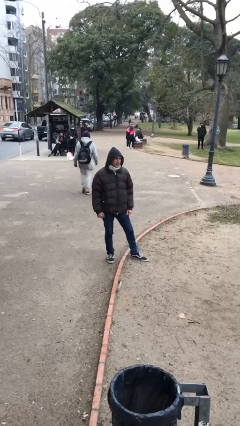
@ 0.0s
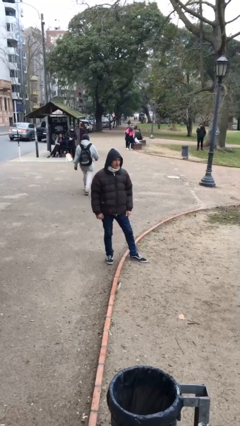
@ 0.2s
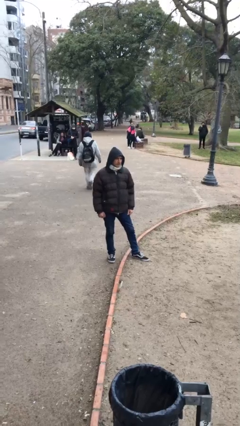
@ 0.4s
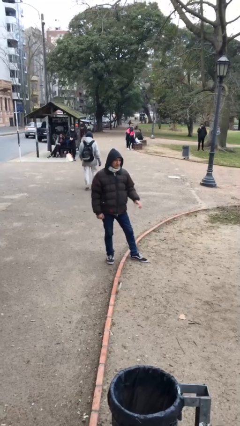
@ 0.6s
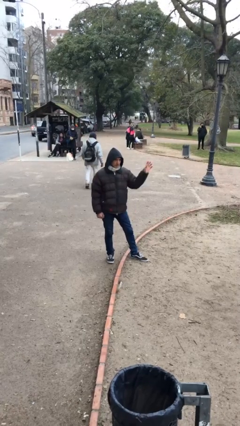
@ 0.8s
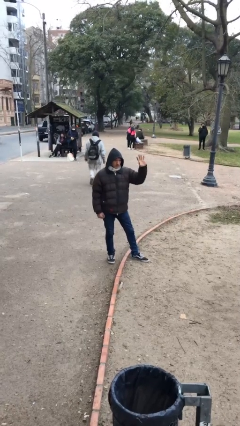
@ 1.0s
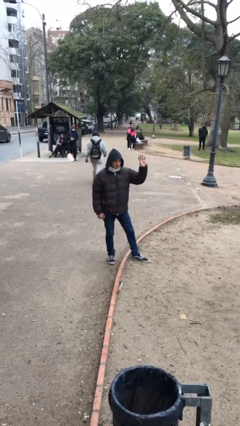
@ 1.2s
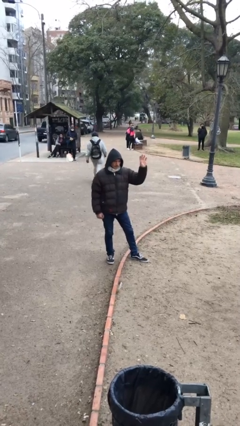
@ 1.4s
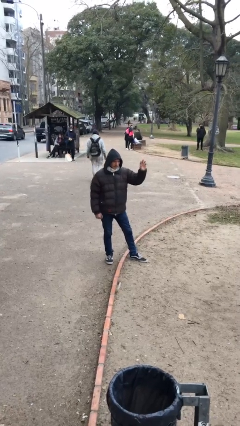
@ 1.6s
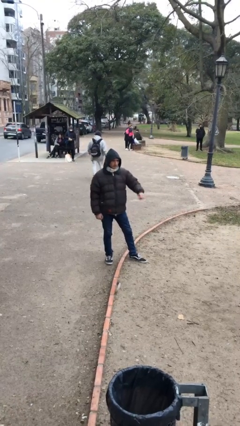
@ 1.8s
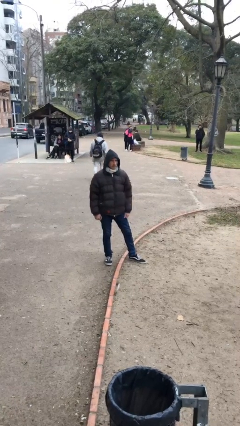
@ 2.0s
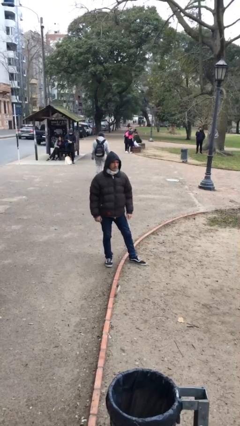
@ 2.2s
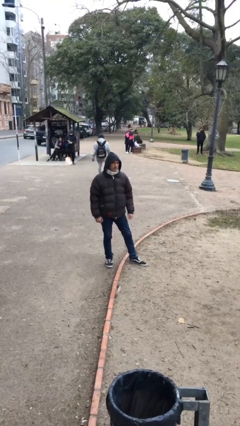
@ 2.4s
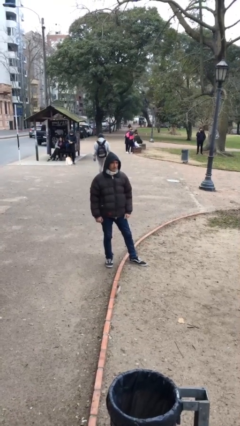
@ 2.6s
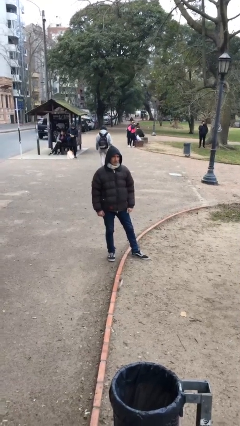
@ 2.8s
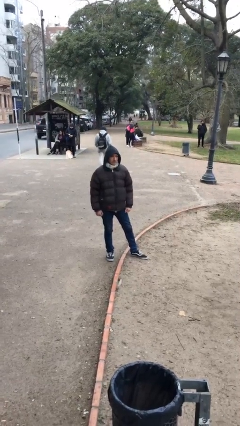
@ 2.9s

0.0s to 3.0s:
person waves at person

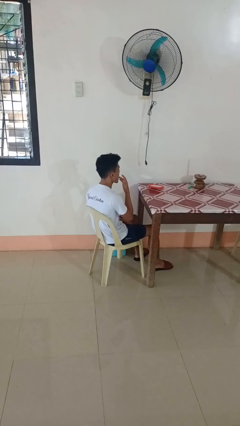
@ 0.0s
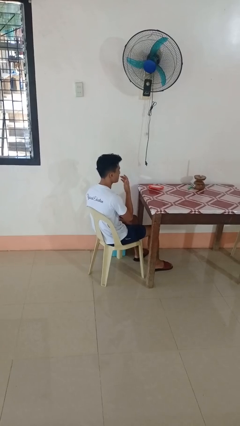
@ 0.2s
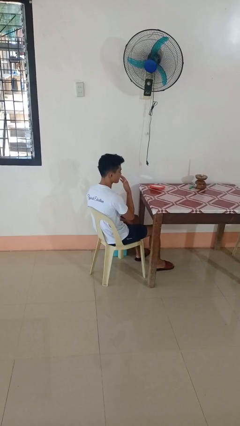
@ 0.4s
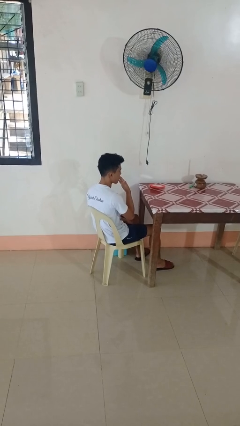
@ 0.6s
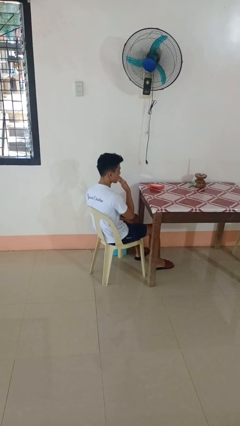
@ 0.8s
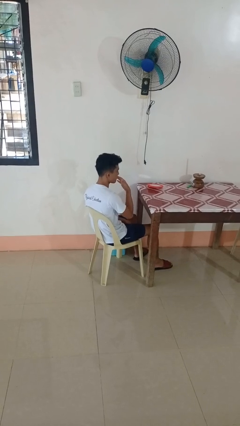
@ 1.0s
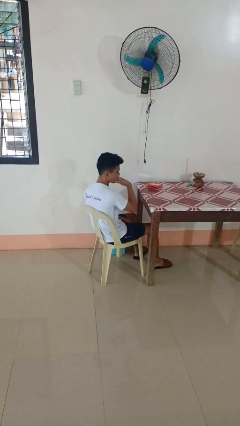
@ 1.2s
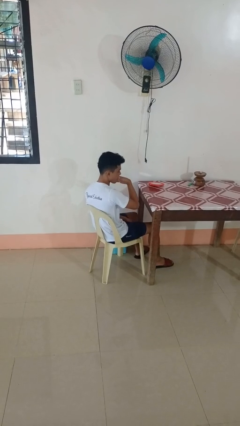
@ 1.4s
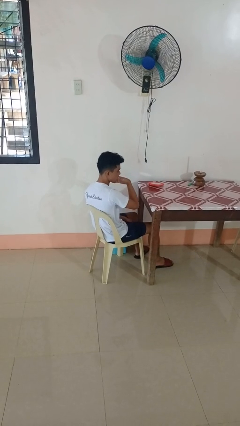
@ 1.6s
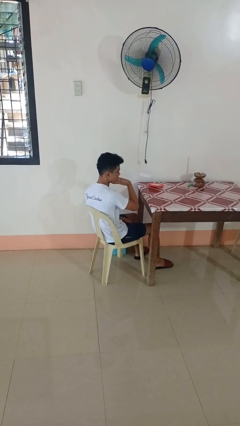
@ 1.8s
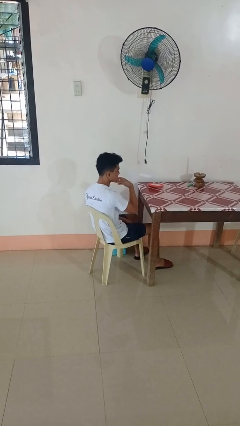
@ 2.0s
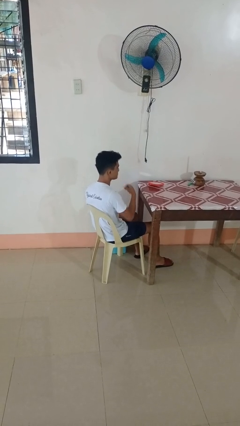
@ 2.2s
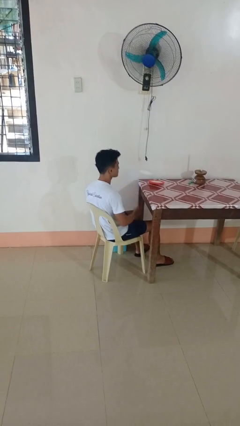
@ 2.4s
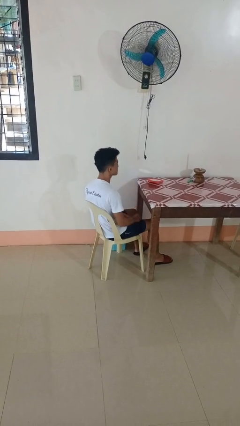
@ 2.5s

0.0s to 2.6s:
person licks fingers

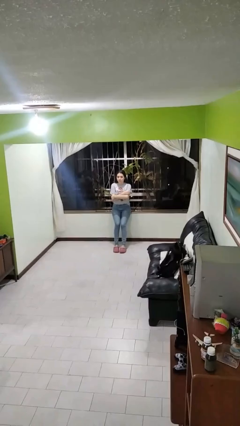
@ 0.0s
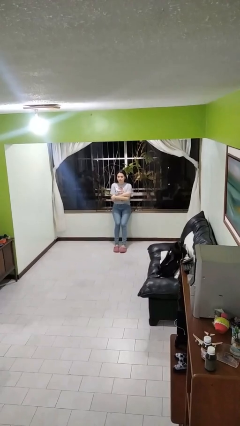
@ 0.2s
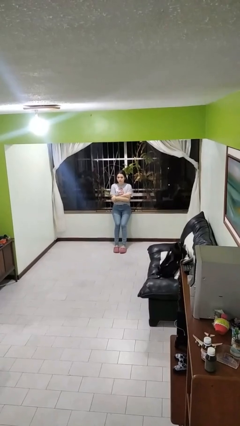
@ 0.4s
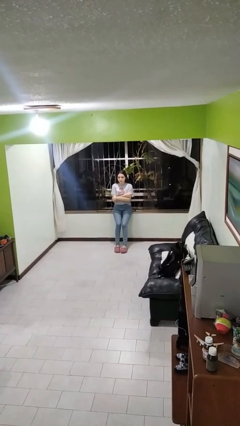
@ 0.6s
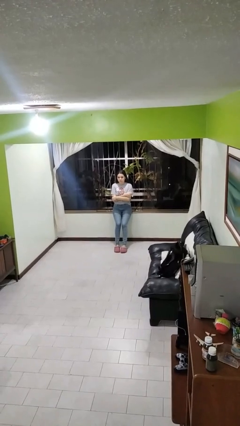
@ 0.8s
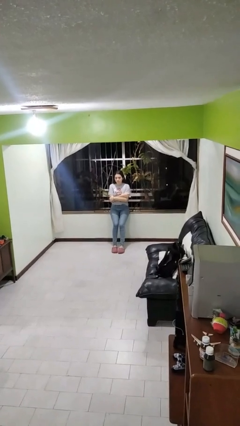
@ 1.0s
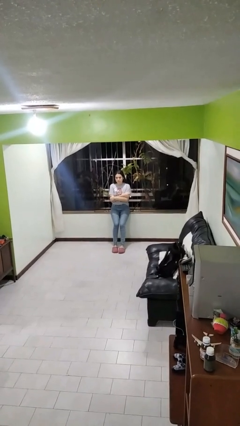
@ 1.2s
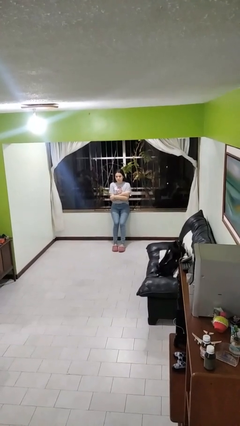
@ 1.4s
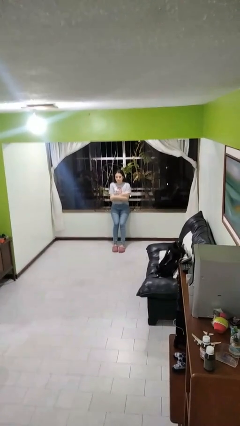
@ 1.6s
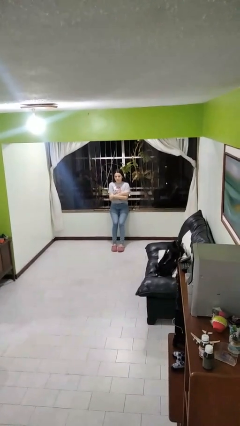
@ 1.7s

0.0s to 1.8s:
person crosses arms

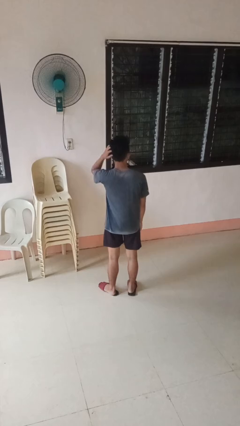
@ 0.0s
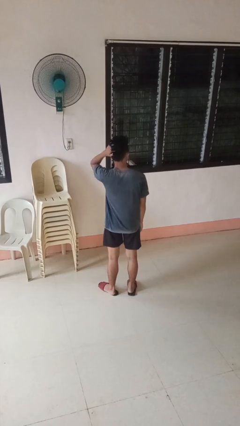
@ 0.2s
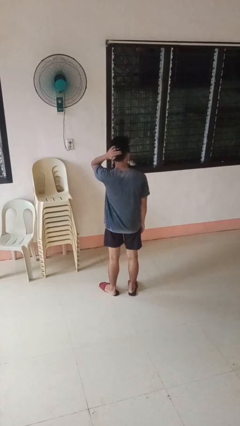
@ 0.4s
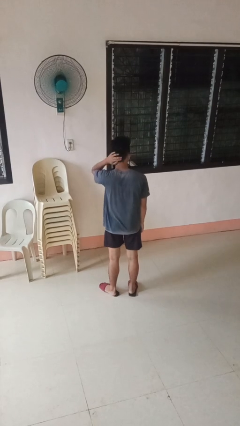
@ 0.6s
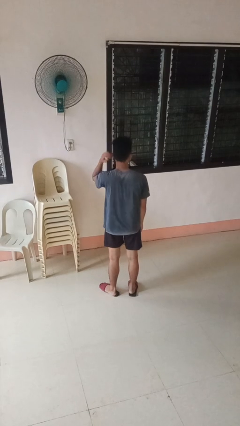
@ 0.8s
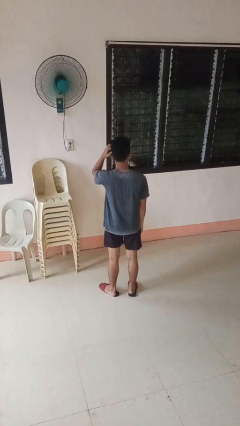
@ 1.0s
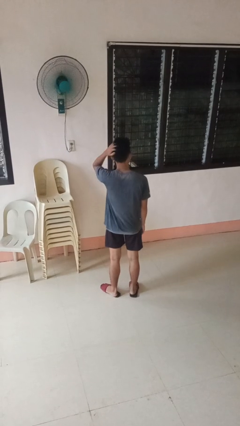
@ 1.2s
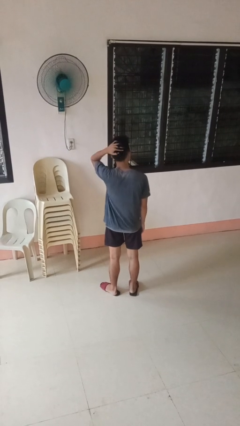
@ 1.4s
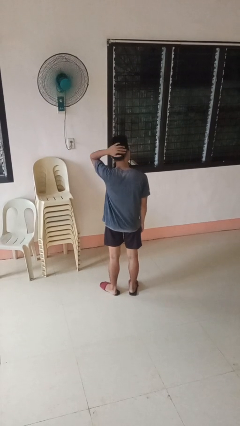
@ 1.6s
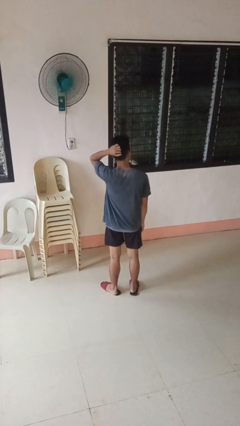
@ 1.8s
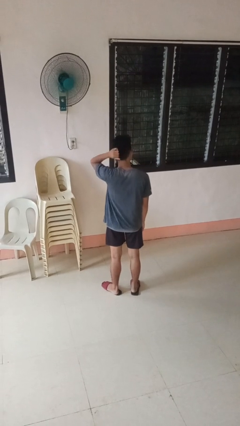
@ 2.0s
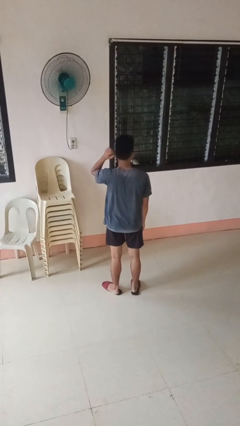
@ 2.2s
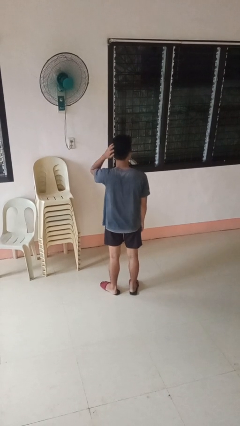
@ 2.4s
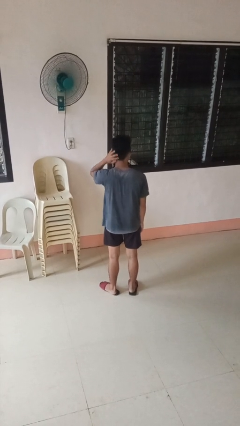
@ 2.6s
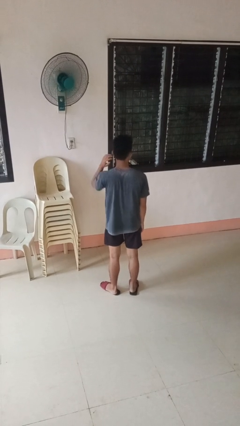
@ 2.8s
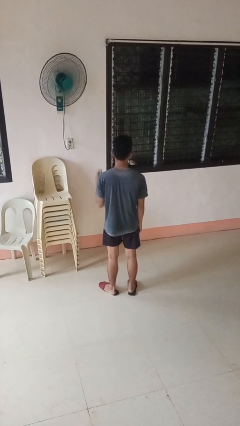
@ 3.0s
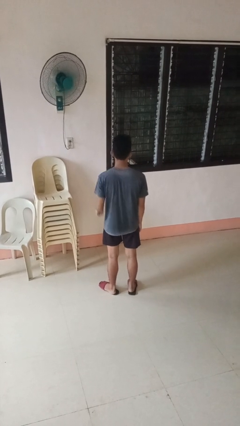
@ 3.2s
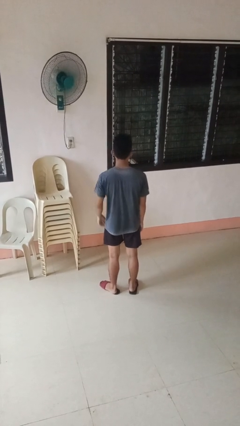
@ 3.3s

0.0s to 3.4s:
person strokes hair

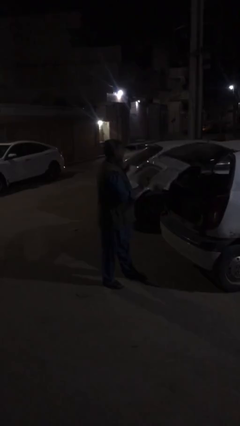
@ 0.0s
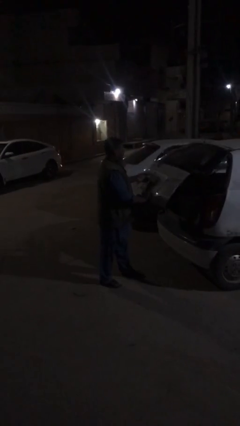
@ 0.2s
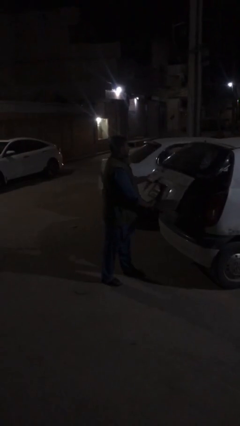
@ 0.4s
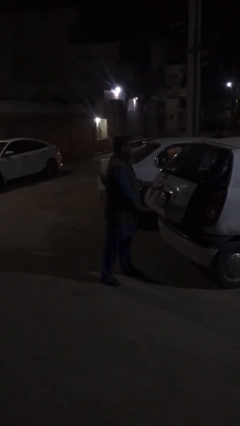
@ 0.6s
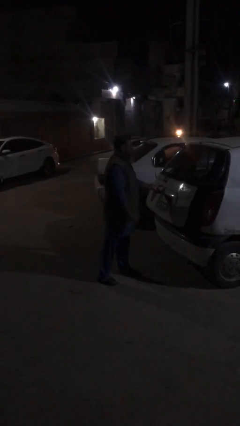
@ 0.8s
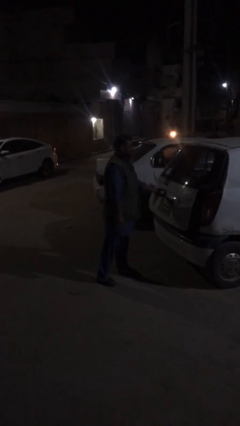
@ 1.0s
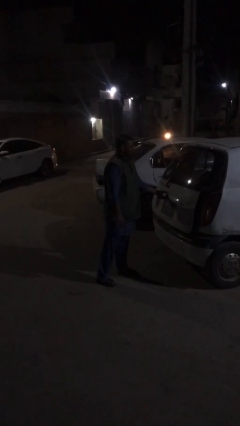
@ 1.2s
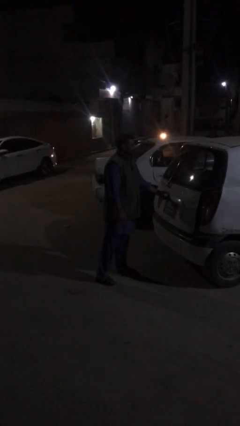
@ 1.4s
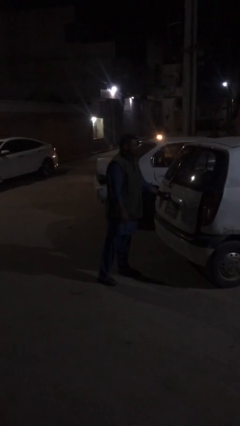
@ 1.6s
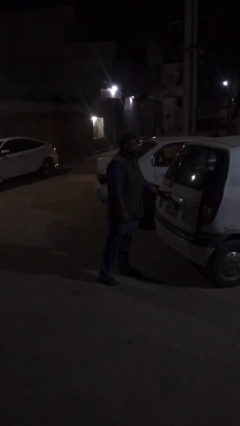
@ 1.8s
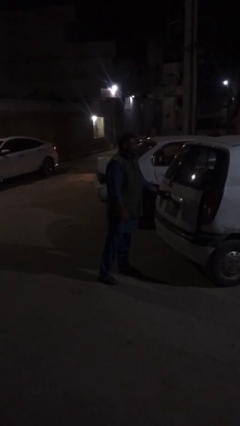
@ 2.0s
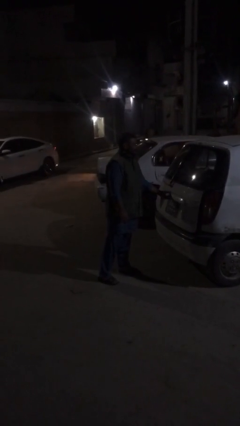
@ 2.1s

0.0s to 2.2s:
person closes car trunk

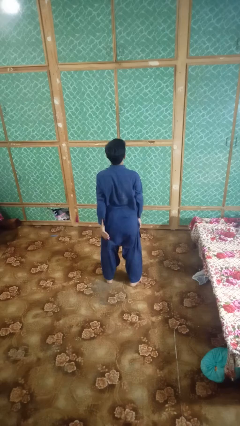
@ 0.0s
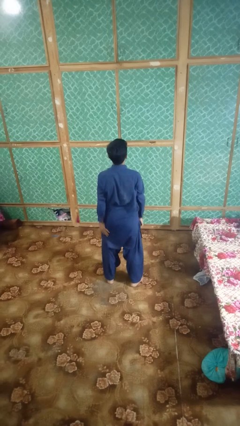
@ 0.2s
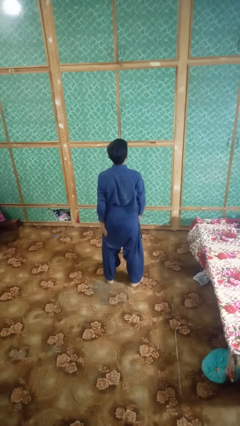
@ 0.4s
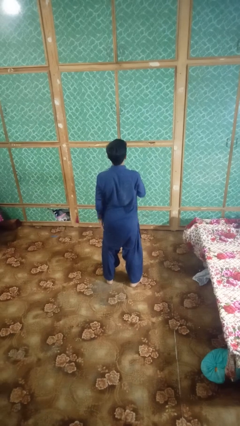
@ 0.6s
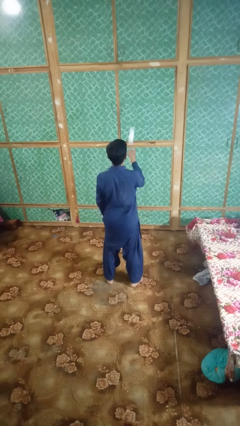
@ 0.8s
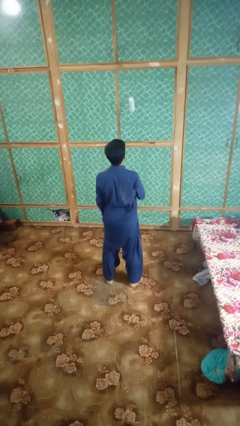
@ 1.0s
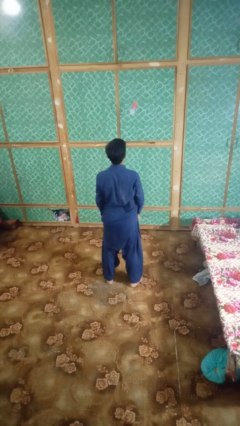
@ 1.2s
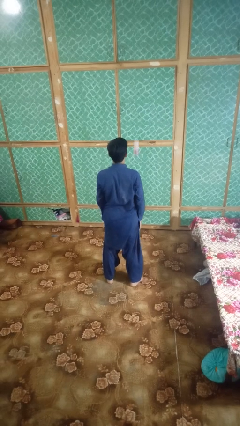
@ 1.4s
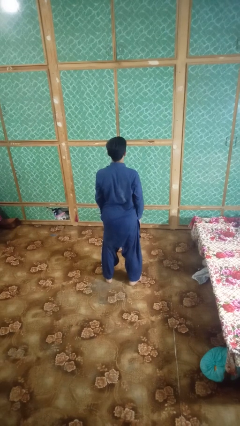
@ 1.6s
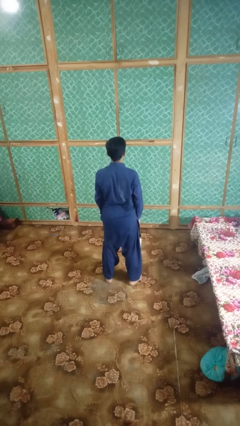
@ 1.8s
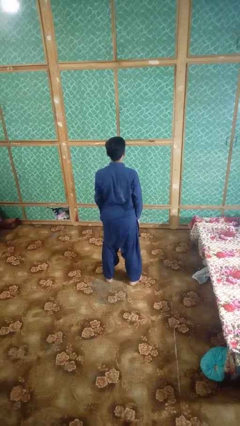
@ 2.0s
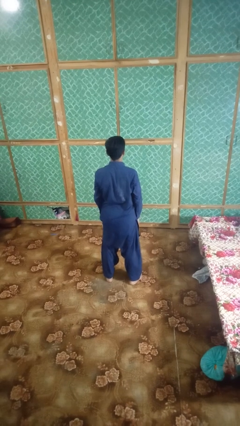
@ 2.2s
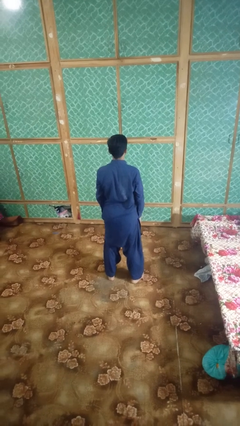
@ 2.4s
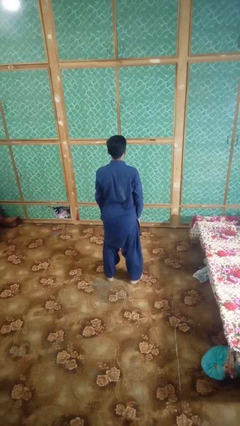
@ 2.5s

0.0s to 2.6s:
person throws object into air

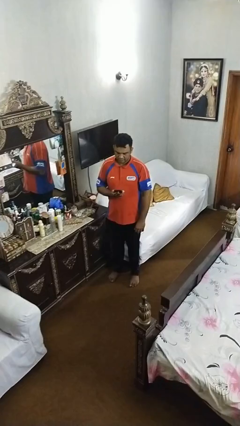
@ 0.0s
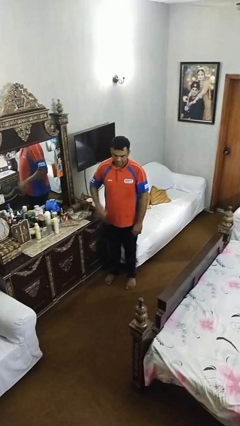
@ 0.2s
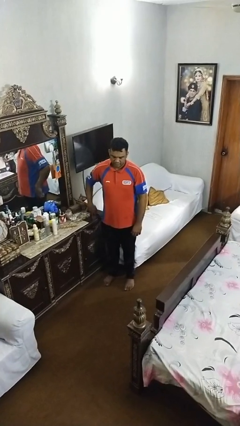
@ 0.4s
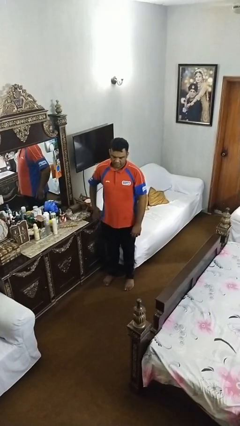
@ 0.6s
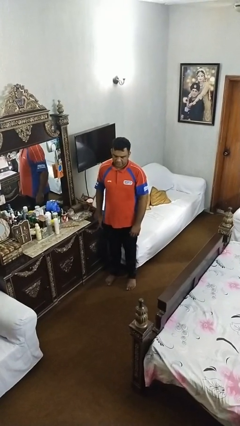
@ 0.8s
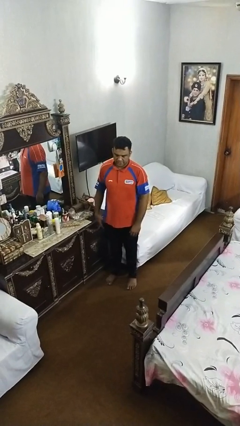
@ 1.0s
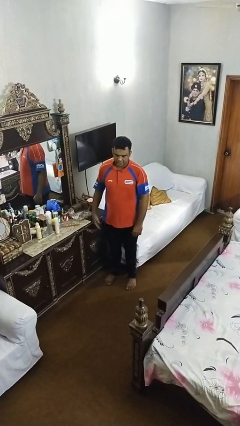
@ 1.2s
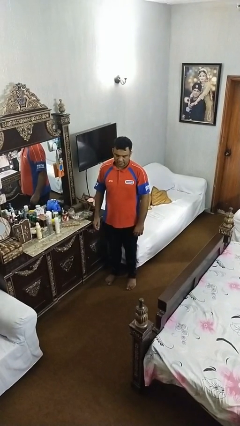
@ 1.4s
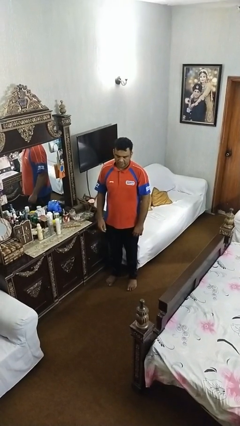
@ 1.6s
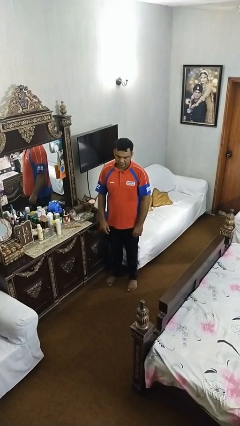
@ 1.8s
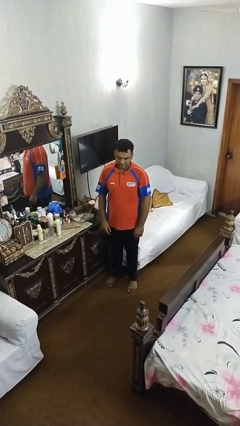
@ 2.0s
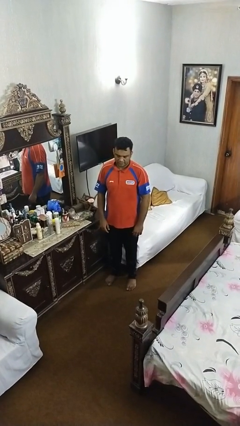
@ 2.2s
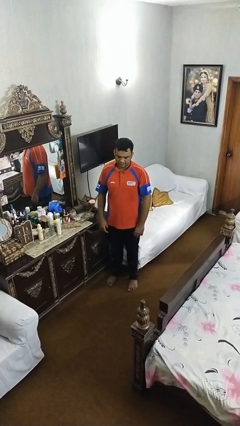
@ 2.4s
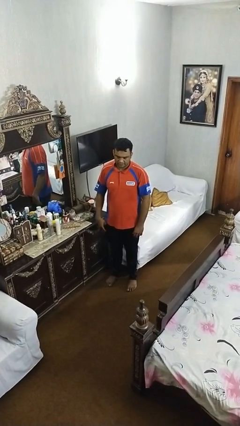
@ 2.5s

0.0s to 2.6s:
person puts phone into pocket
